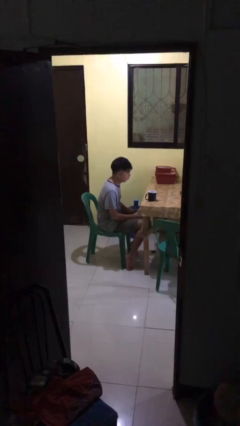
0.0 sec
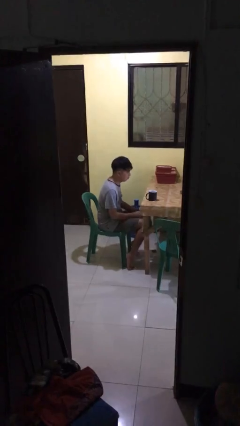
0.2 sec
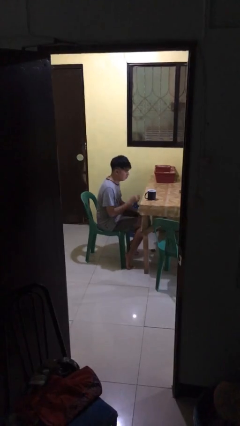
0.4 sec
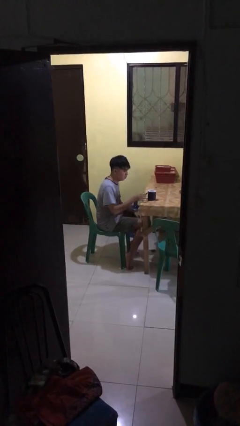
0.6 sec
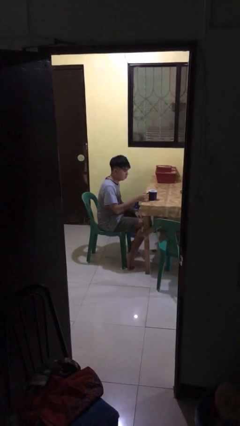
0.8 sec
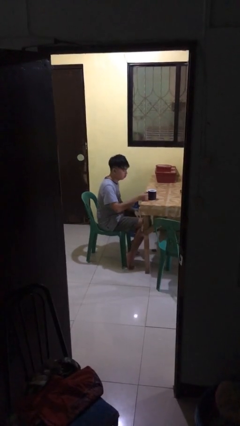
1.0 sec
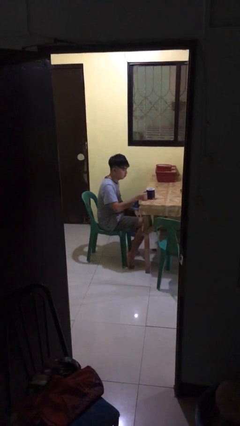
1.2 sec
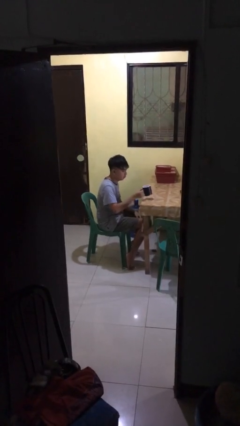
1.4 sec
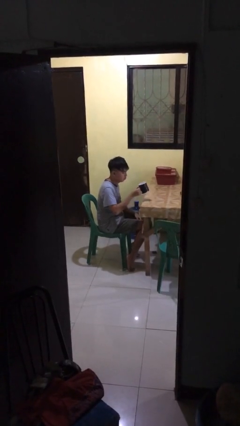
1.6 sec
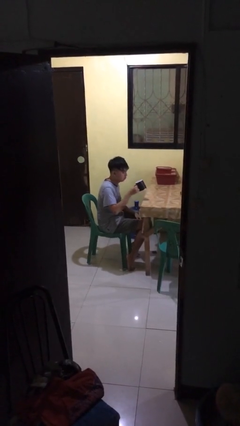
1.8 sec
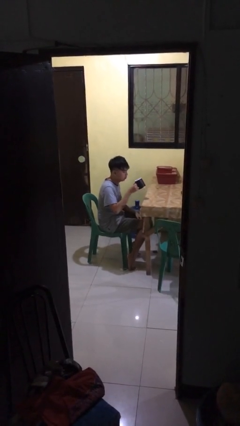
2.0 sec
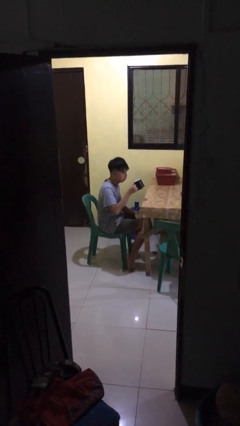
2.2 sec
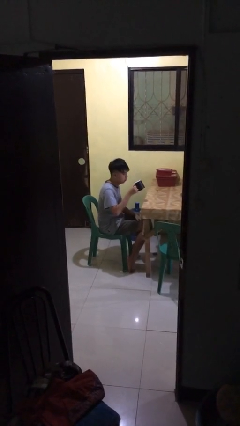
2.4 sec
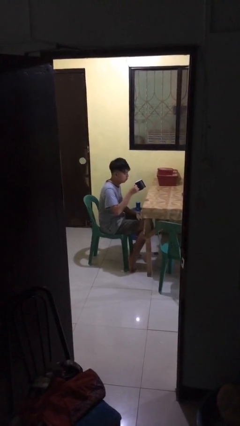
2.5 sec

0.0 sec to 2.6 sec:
person picks up object from table

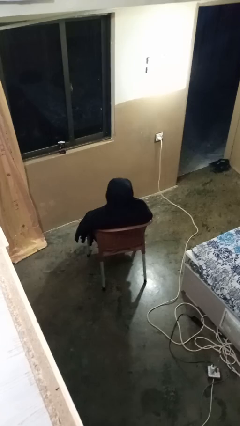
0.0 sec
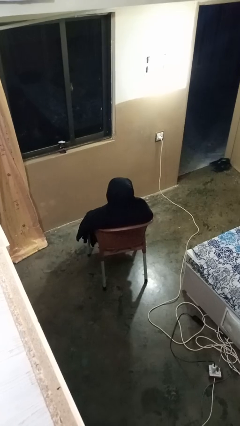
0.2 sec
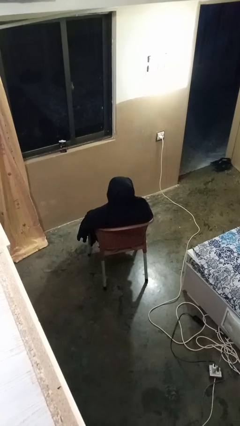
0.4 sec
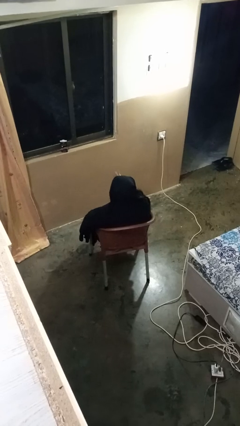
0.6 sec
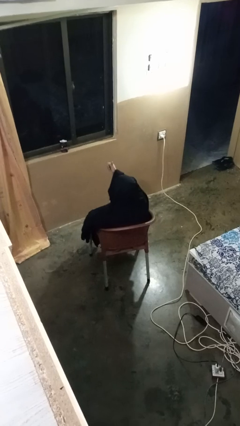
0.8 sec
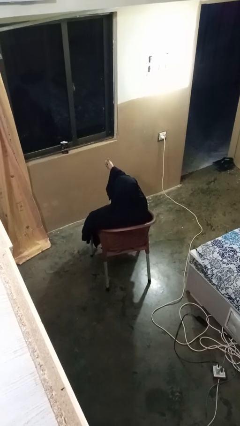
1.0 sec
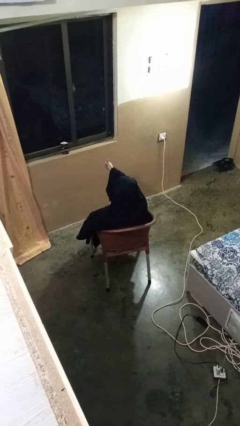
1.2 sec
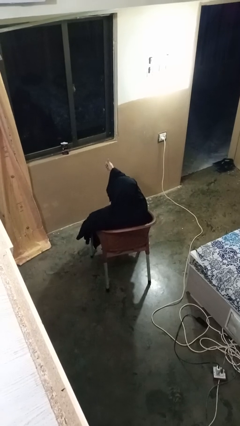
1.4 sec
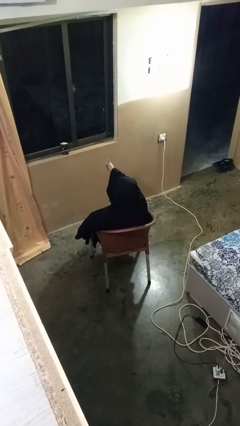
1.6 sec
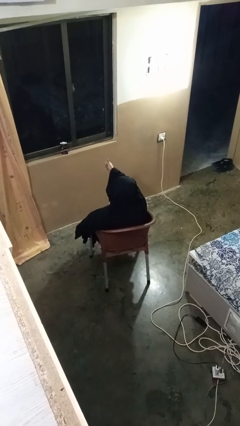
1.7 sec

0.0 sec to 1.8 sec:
person gestures thumbs up

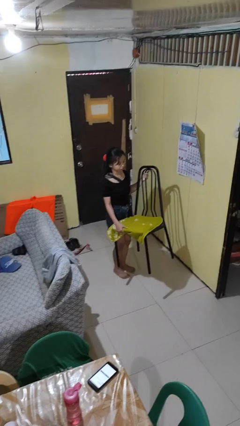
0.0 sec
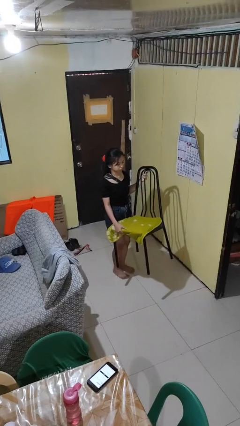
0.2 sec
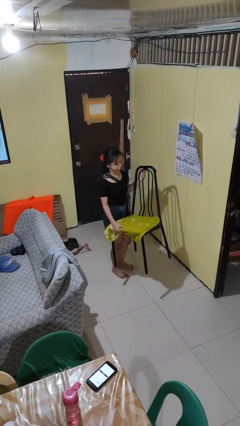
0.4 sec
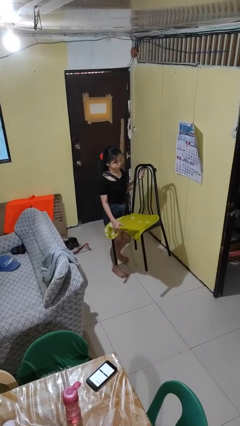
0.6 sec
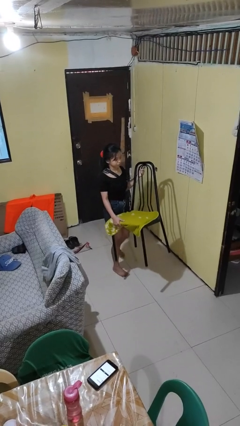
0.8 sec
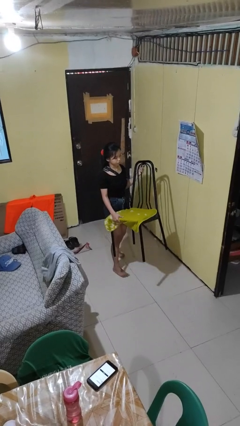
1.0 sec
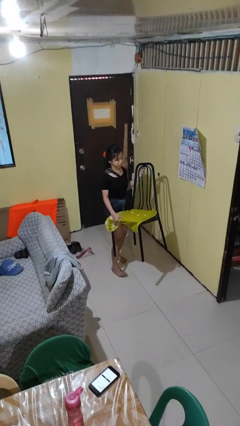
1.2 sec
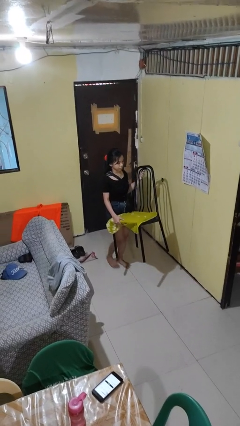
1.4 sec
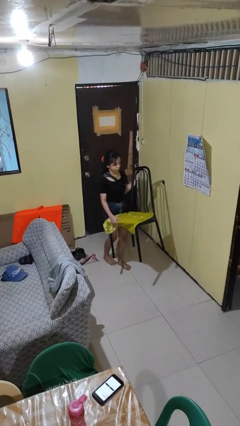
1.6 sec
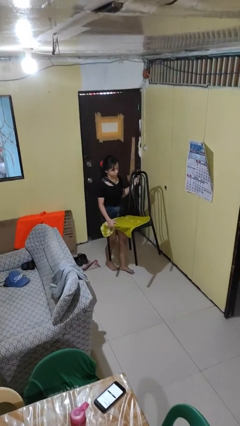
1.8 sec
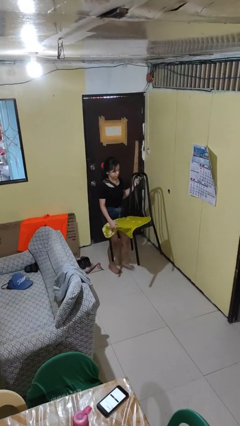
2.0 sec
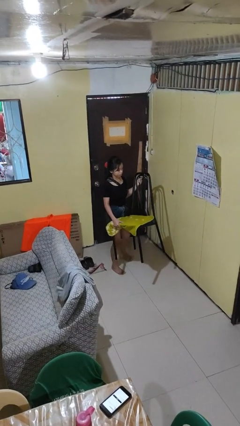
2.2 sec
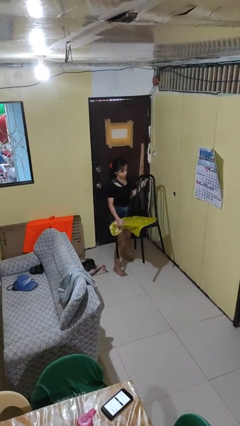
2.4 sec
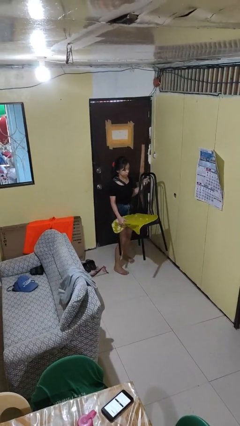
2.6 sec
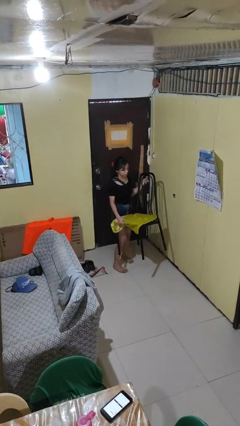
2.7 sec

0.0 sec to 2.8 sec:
person carries furniture

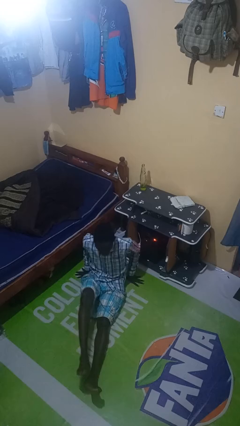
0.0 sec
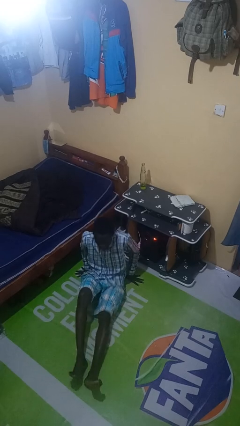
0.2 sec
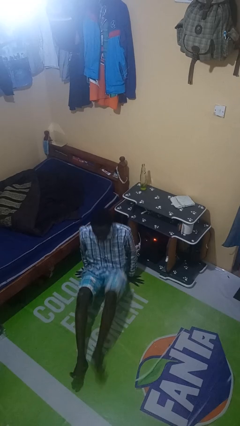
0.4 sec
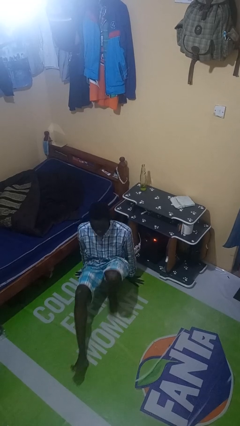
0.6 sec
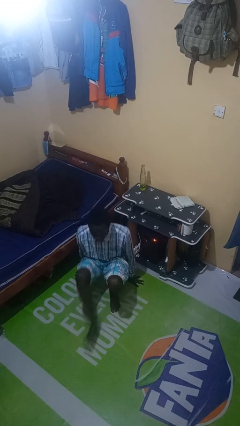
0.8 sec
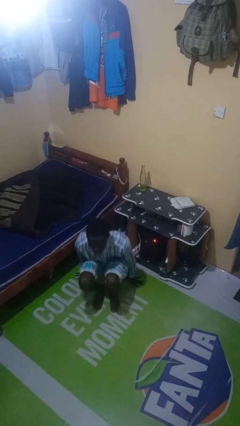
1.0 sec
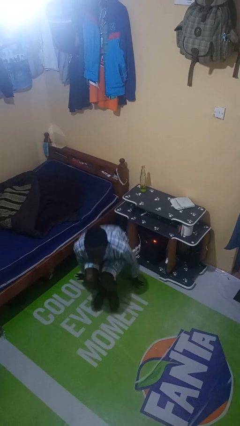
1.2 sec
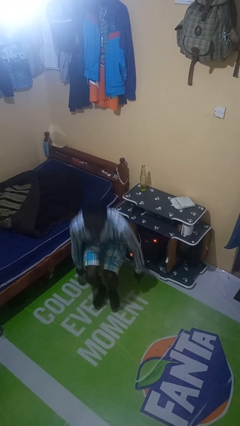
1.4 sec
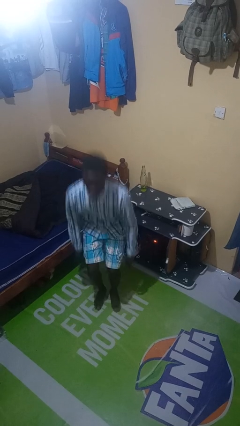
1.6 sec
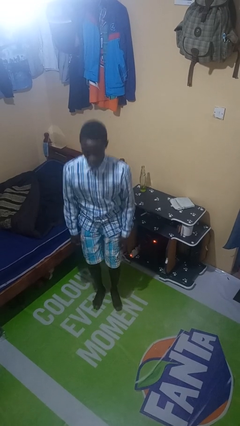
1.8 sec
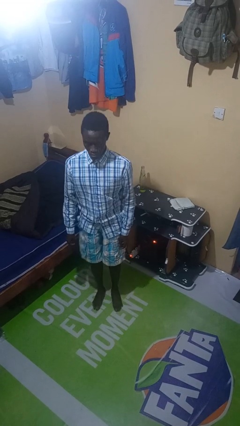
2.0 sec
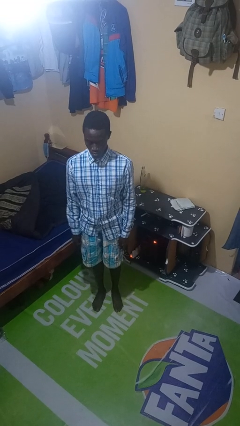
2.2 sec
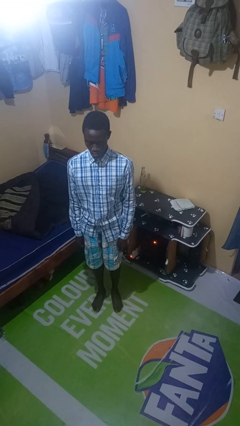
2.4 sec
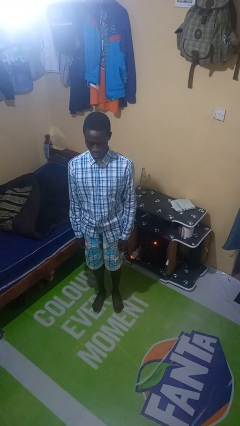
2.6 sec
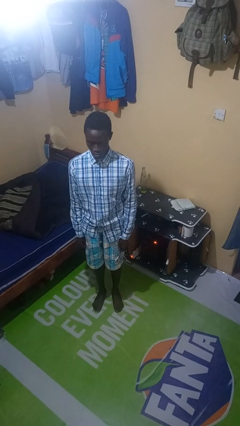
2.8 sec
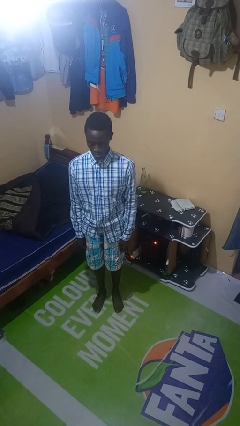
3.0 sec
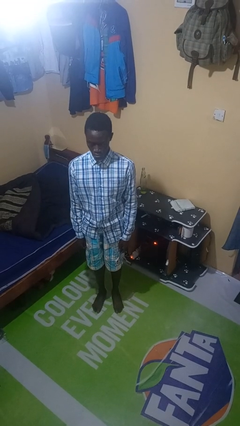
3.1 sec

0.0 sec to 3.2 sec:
person stands up from floor

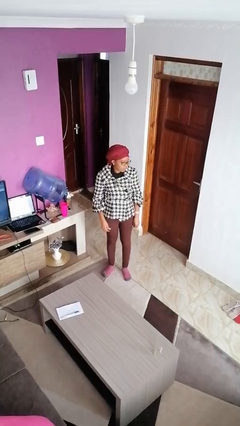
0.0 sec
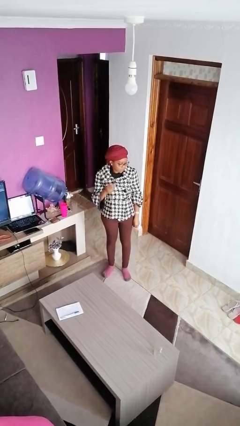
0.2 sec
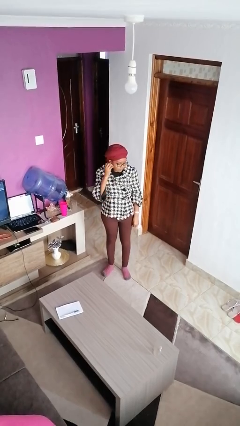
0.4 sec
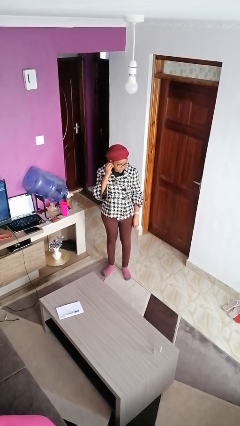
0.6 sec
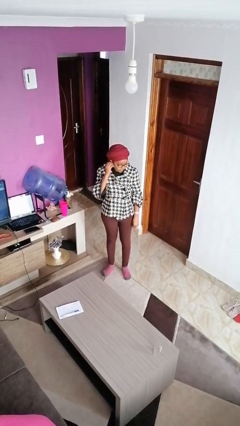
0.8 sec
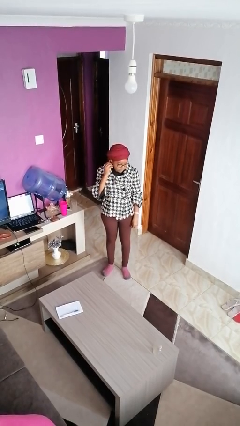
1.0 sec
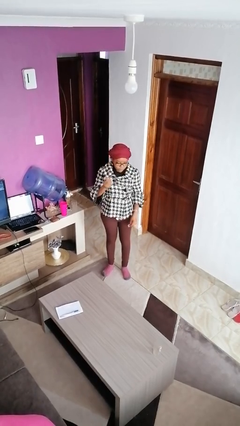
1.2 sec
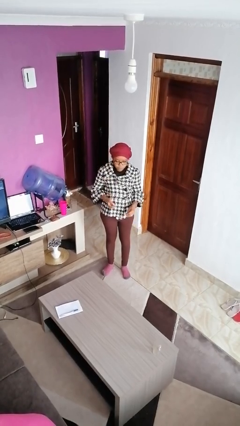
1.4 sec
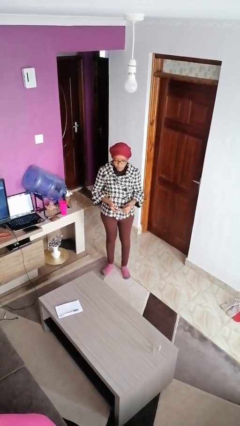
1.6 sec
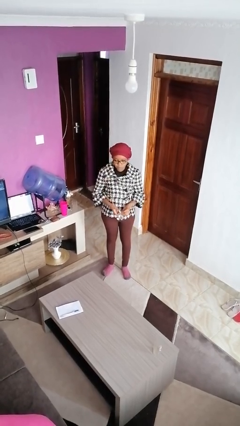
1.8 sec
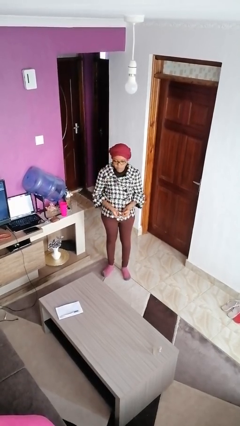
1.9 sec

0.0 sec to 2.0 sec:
person takes off earrings

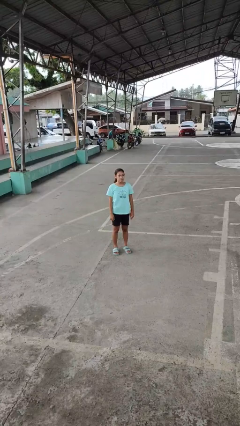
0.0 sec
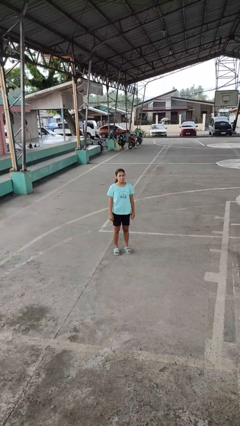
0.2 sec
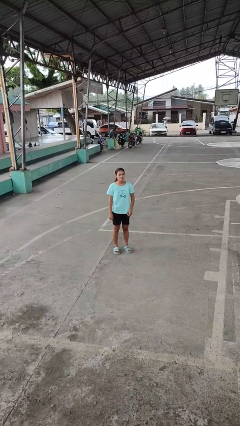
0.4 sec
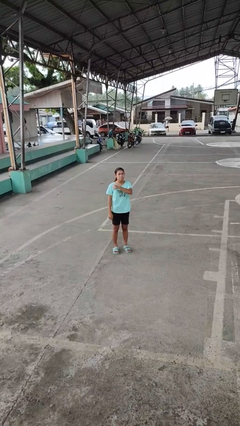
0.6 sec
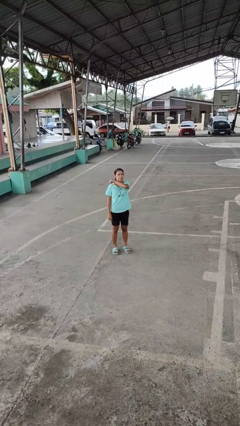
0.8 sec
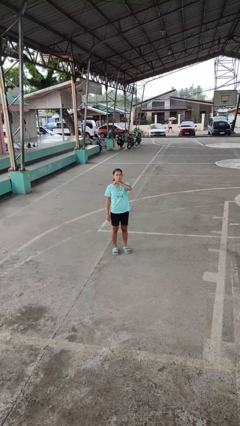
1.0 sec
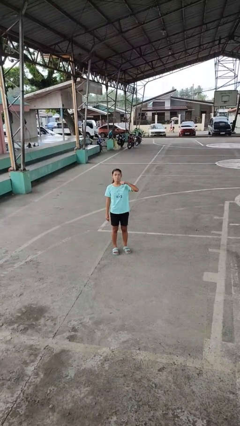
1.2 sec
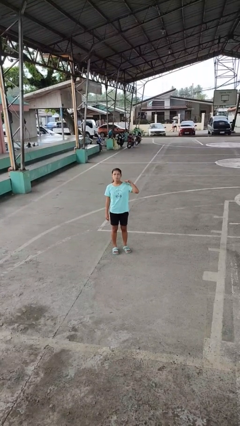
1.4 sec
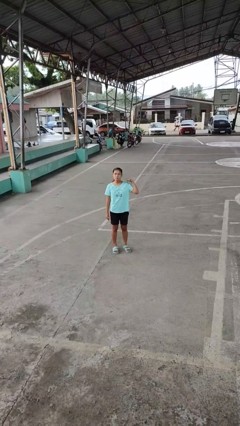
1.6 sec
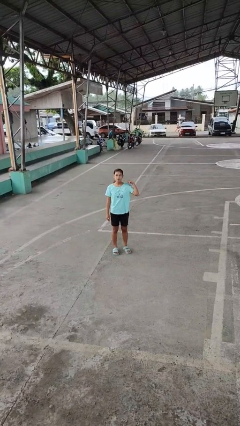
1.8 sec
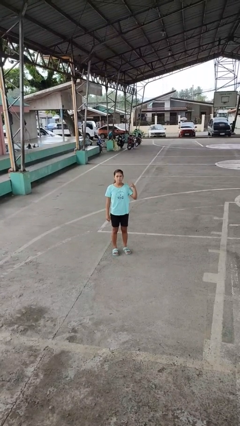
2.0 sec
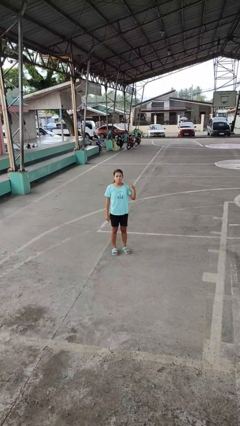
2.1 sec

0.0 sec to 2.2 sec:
person gestures cut

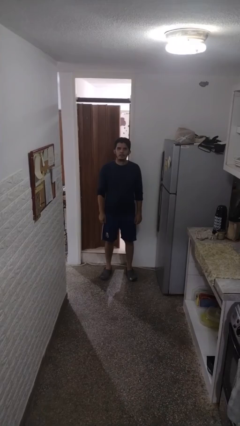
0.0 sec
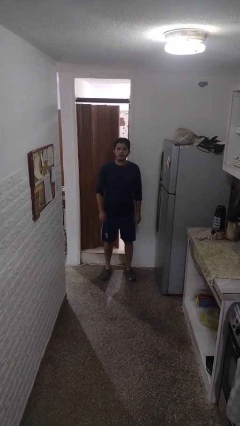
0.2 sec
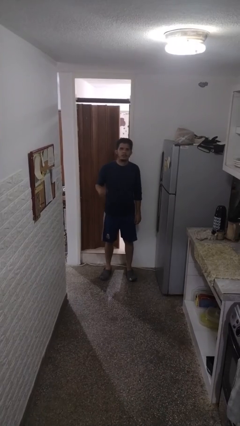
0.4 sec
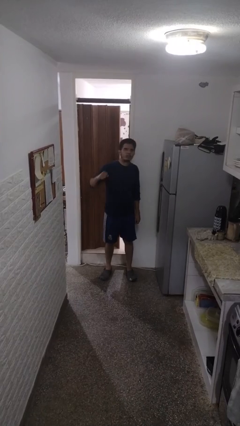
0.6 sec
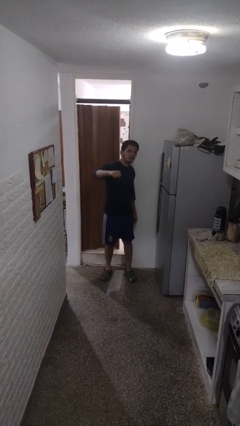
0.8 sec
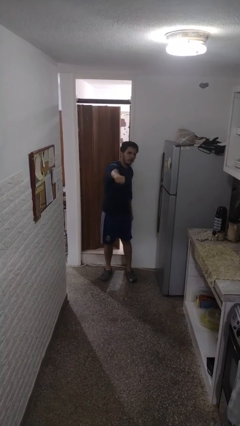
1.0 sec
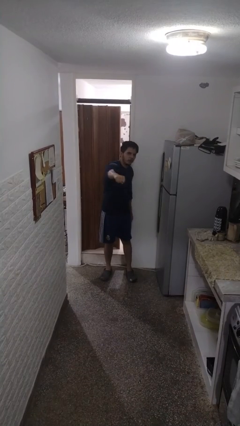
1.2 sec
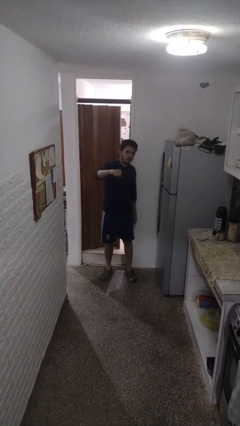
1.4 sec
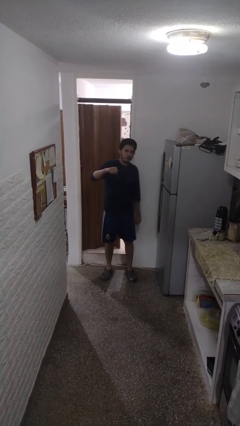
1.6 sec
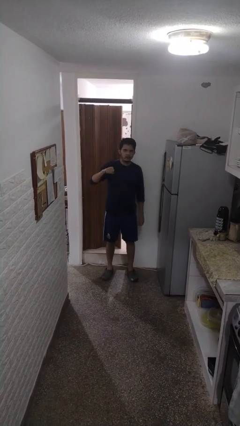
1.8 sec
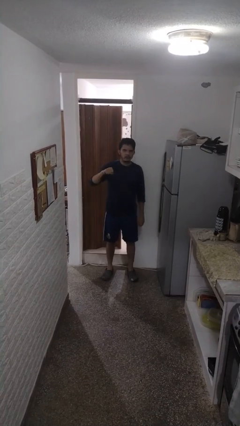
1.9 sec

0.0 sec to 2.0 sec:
person punches
